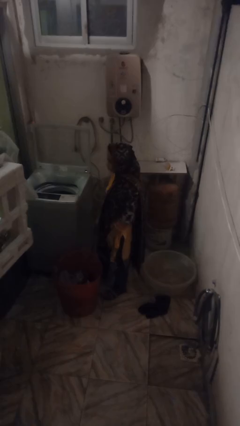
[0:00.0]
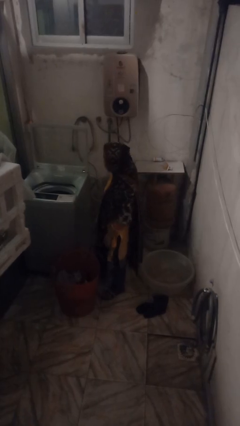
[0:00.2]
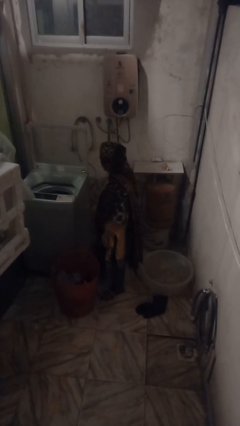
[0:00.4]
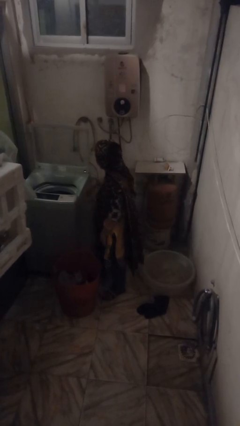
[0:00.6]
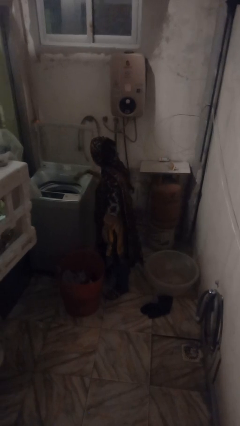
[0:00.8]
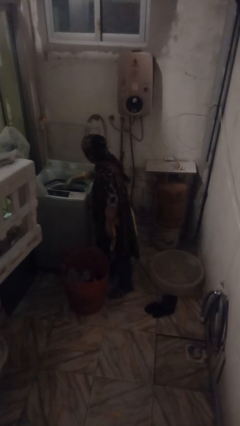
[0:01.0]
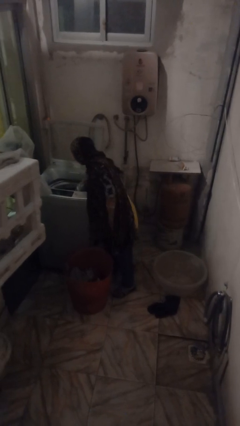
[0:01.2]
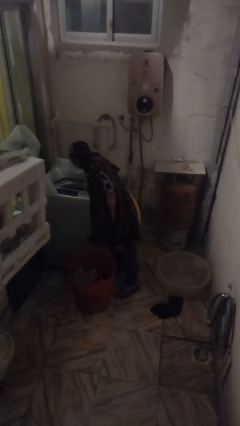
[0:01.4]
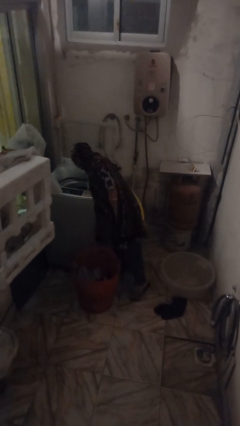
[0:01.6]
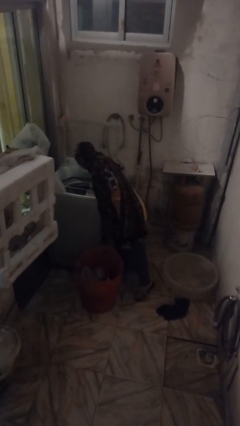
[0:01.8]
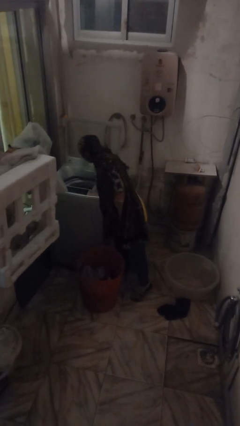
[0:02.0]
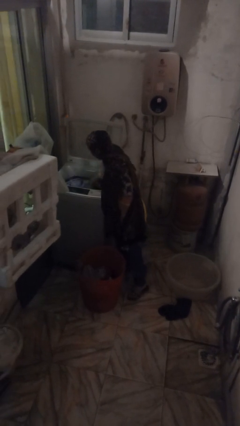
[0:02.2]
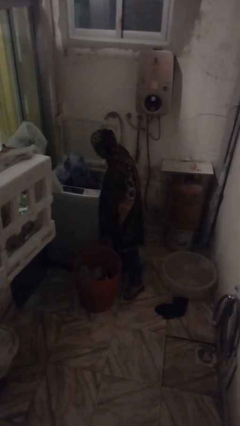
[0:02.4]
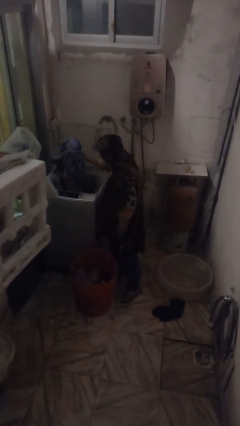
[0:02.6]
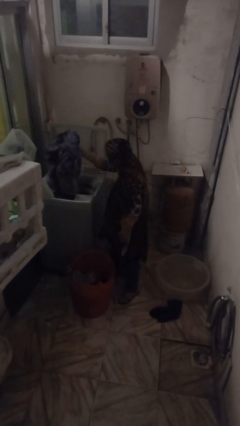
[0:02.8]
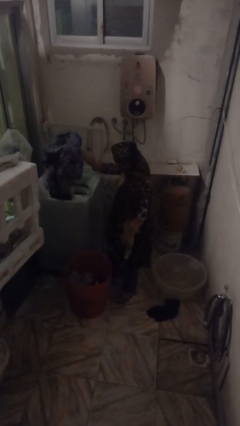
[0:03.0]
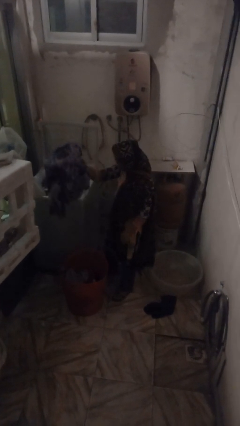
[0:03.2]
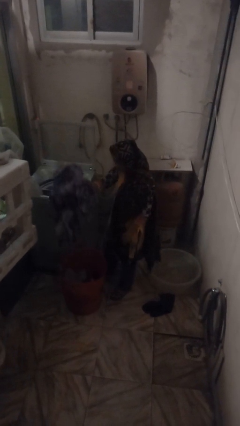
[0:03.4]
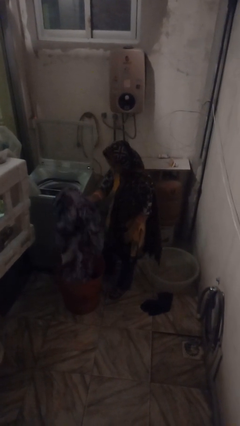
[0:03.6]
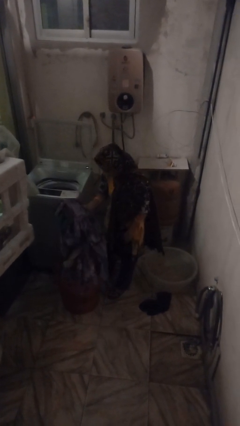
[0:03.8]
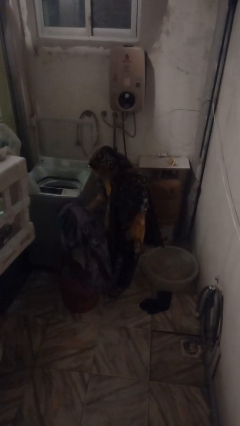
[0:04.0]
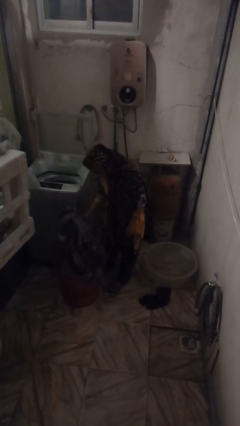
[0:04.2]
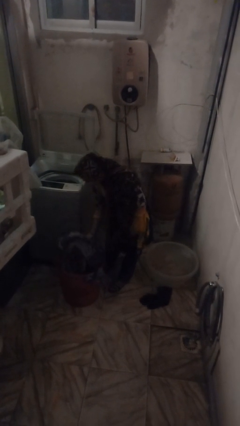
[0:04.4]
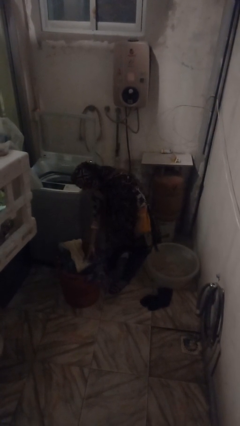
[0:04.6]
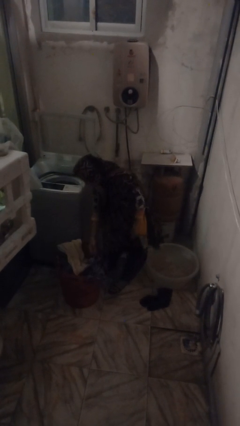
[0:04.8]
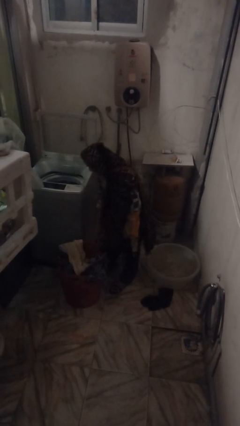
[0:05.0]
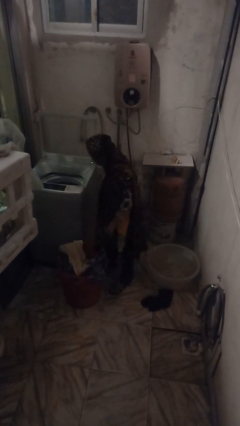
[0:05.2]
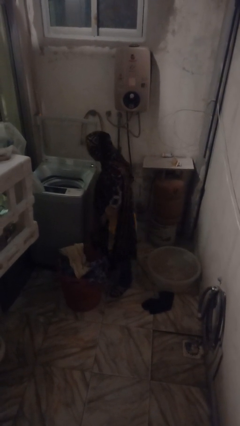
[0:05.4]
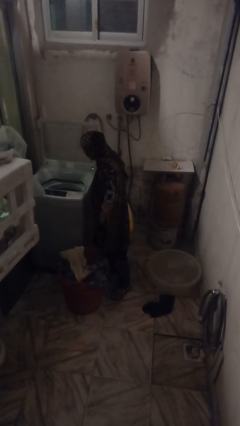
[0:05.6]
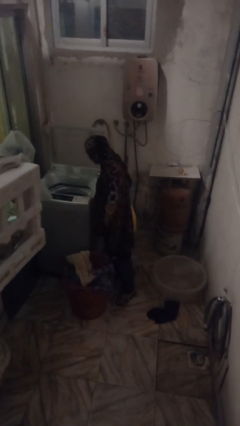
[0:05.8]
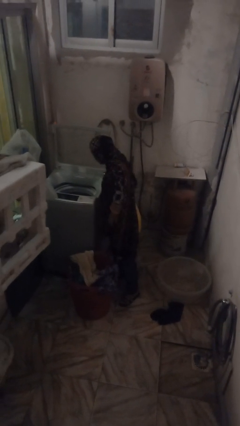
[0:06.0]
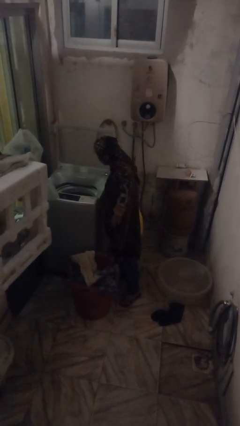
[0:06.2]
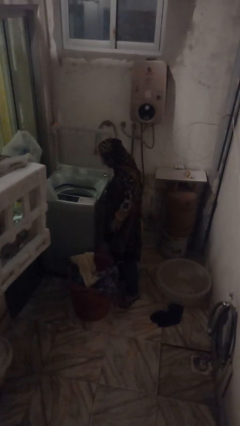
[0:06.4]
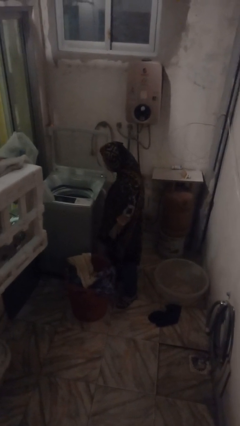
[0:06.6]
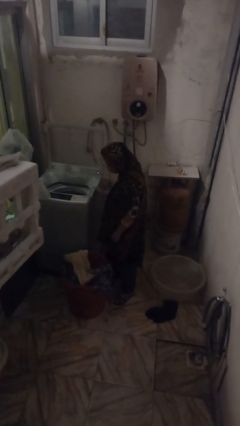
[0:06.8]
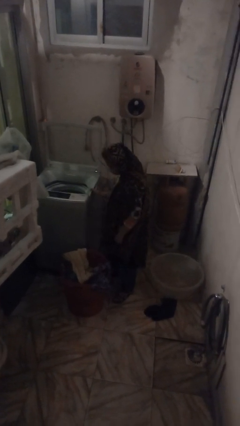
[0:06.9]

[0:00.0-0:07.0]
person unloads clotheswasher

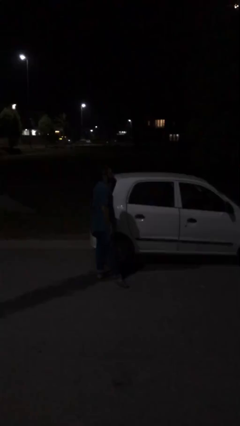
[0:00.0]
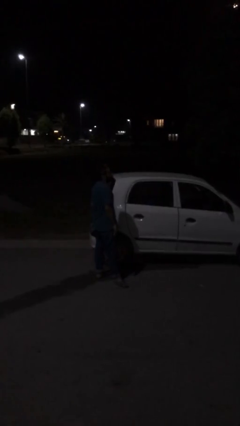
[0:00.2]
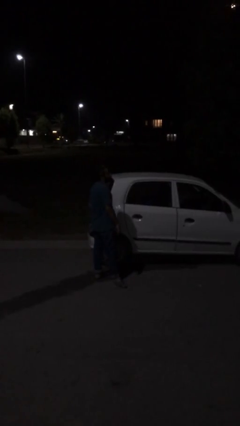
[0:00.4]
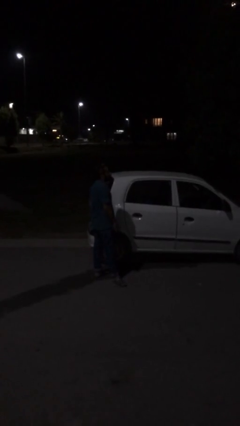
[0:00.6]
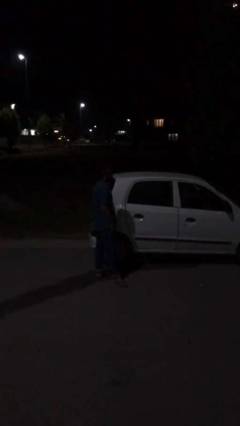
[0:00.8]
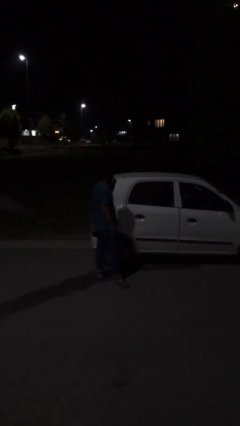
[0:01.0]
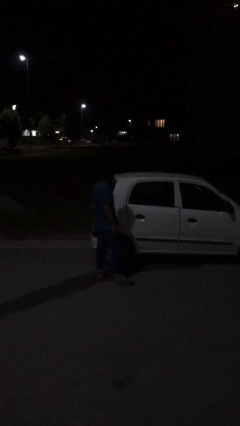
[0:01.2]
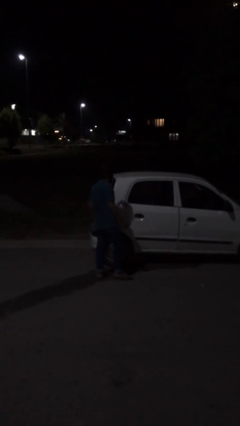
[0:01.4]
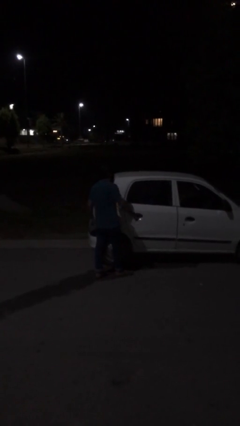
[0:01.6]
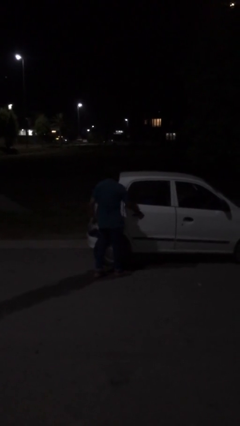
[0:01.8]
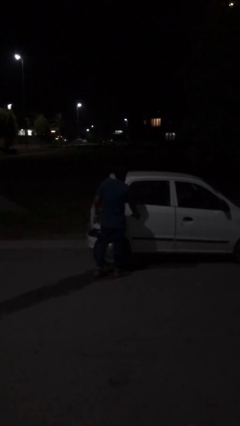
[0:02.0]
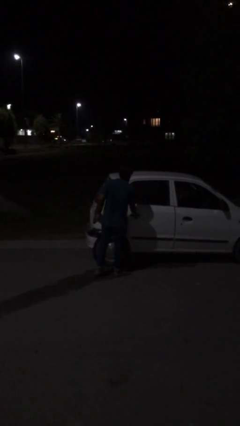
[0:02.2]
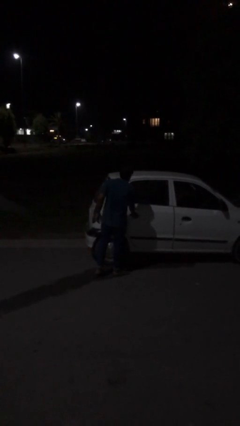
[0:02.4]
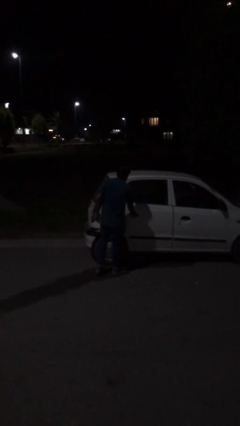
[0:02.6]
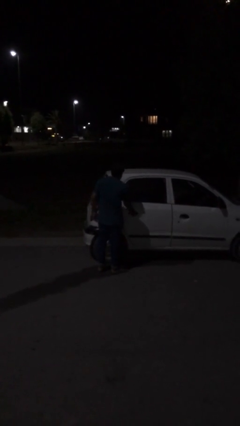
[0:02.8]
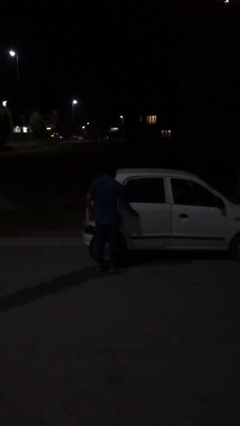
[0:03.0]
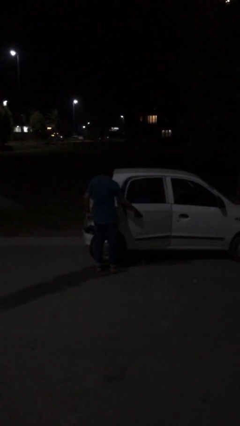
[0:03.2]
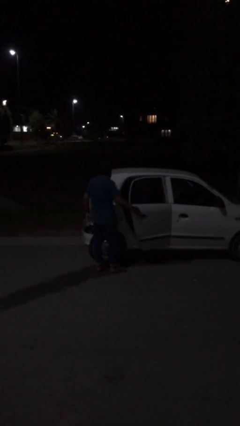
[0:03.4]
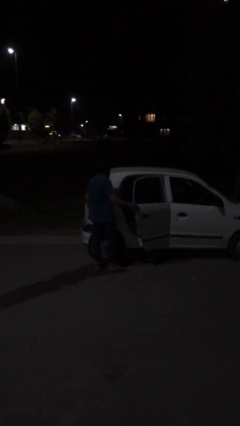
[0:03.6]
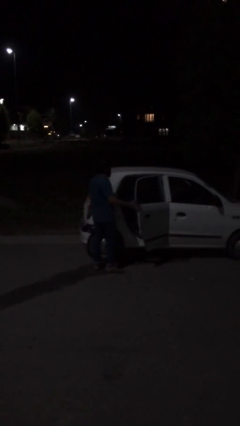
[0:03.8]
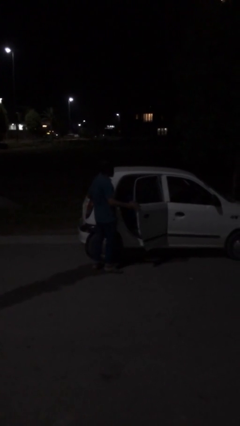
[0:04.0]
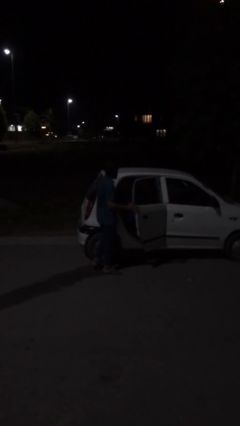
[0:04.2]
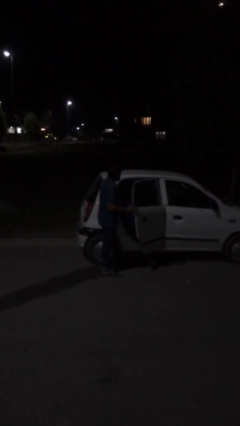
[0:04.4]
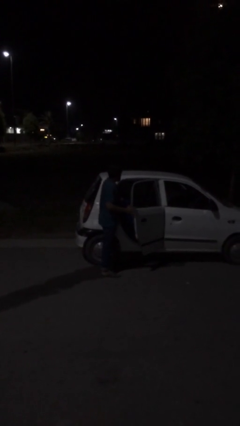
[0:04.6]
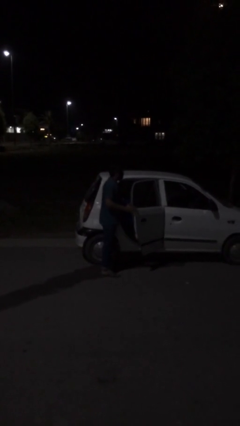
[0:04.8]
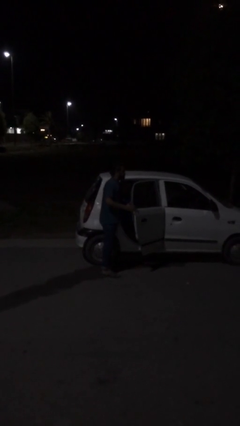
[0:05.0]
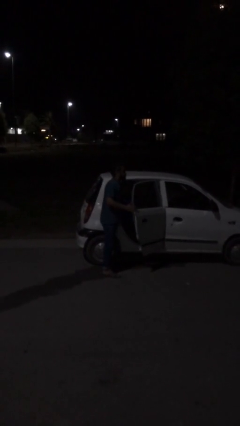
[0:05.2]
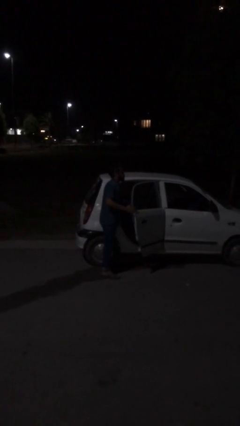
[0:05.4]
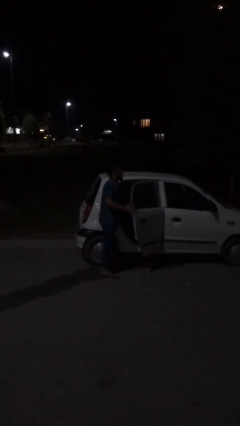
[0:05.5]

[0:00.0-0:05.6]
person opens car door

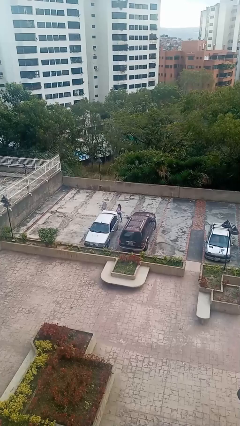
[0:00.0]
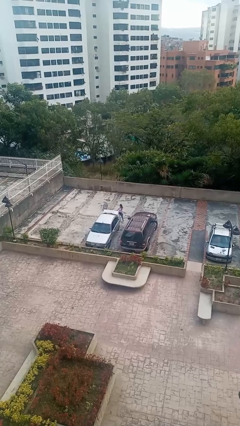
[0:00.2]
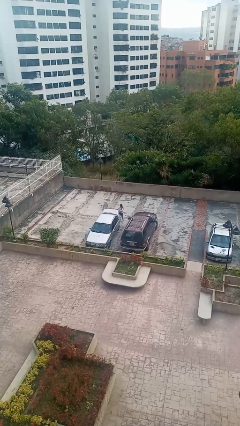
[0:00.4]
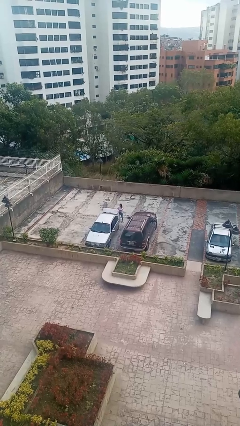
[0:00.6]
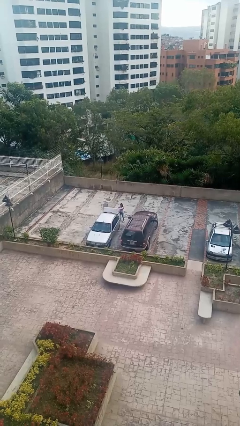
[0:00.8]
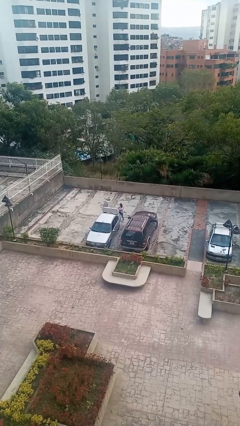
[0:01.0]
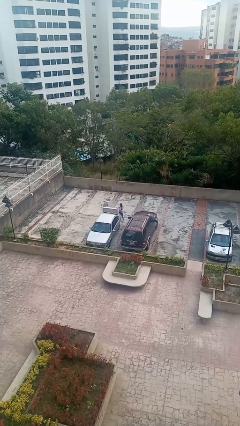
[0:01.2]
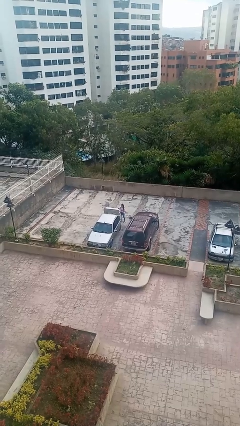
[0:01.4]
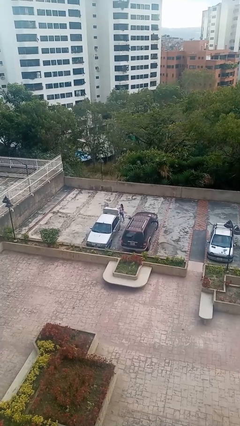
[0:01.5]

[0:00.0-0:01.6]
person opens car trunk

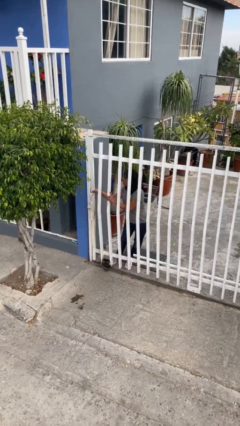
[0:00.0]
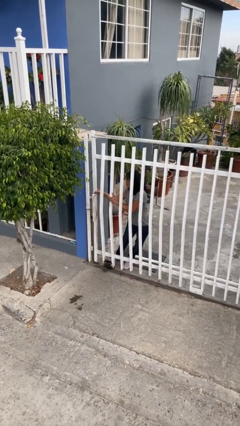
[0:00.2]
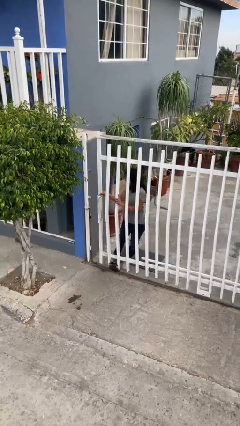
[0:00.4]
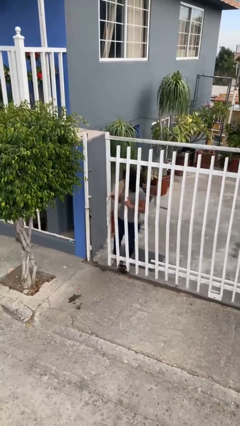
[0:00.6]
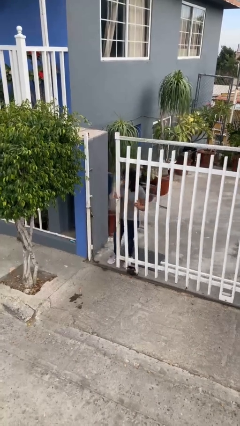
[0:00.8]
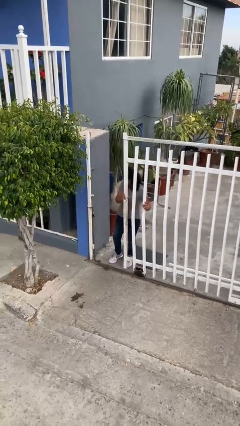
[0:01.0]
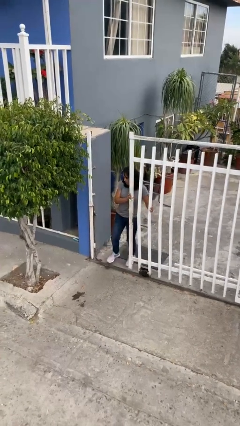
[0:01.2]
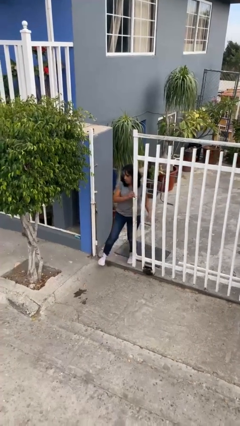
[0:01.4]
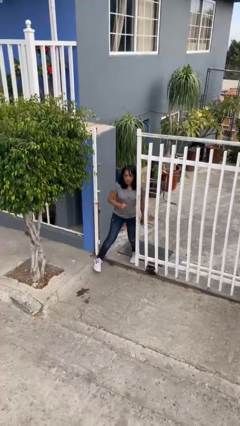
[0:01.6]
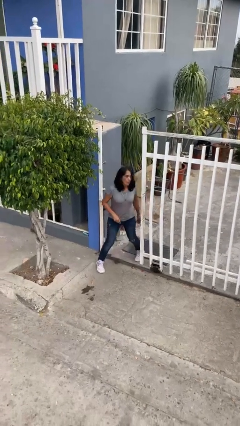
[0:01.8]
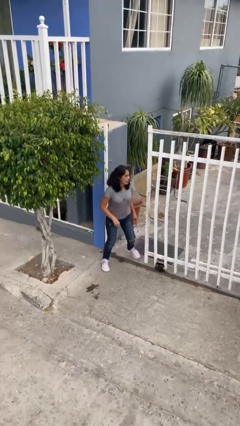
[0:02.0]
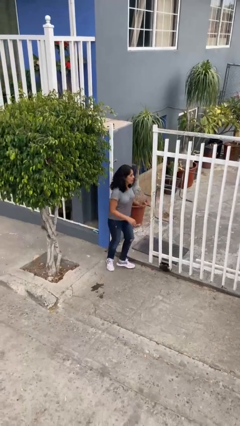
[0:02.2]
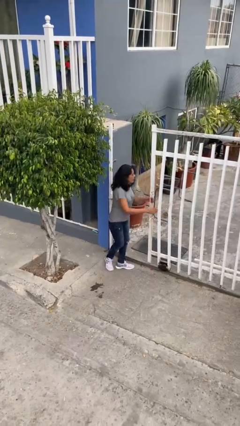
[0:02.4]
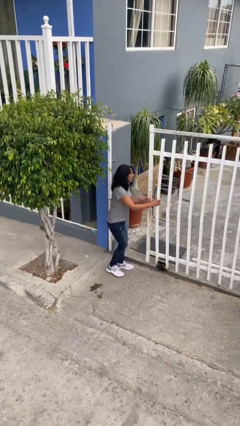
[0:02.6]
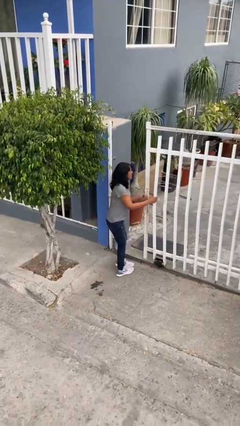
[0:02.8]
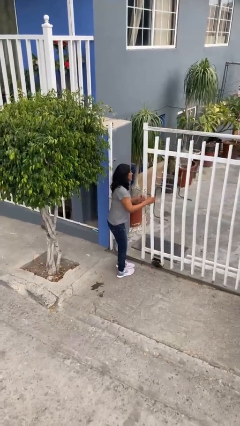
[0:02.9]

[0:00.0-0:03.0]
person opens facility door

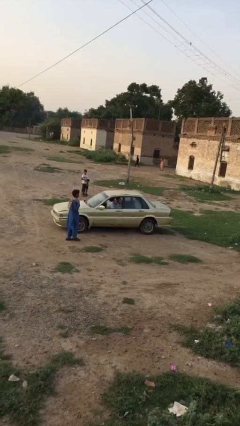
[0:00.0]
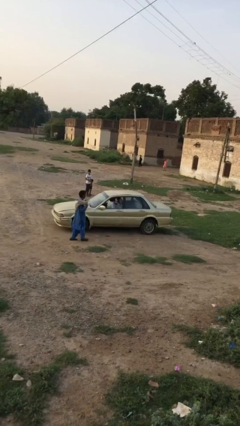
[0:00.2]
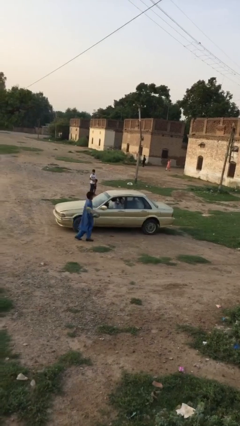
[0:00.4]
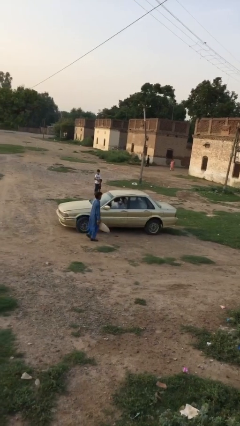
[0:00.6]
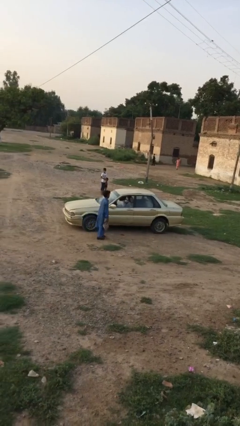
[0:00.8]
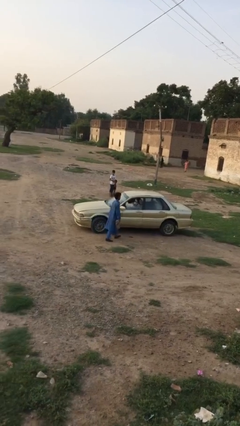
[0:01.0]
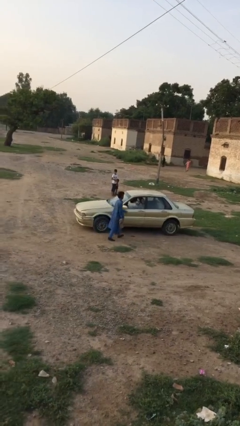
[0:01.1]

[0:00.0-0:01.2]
car picks up person
